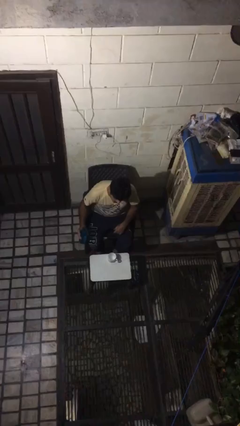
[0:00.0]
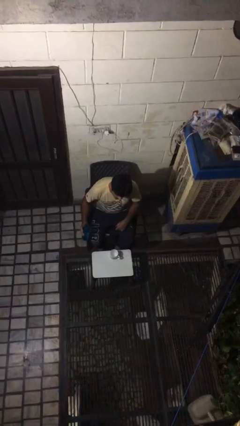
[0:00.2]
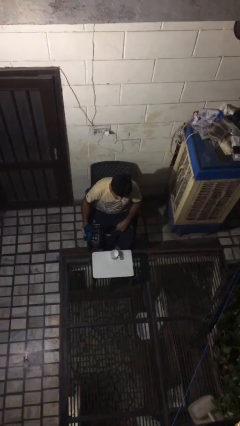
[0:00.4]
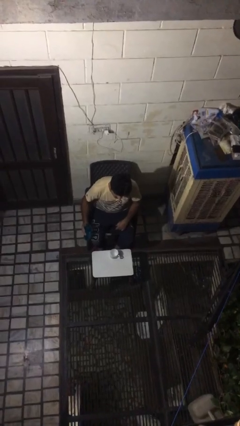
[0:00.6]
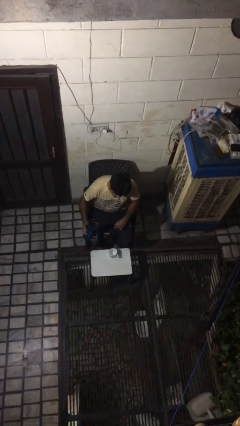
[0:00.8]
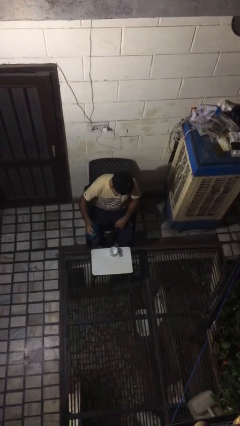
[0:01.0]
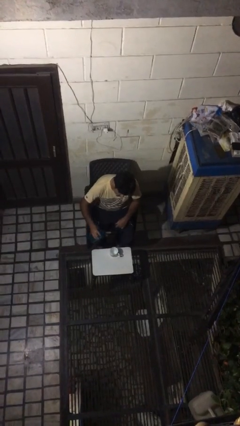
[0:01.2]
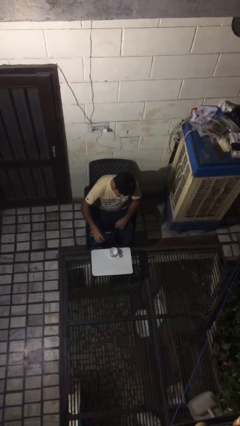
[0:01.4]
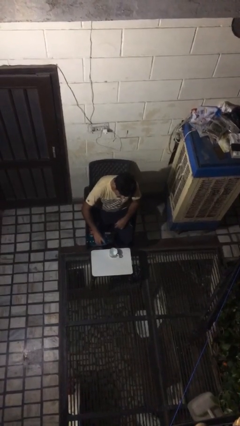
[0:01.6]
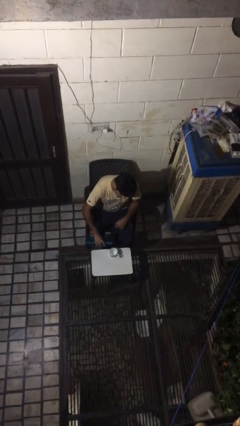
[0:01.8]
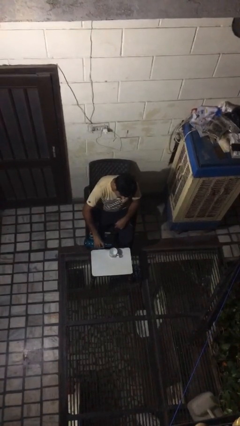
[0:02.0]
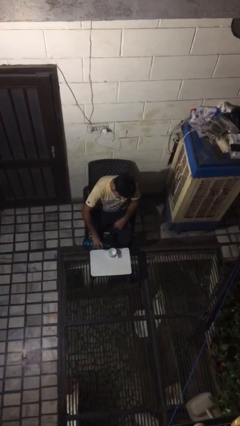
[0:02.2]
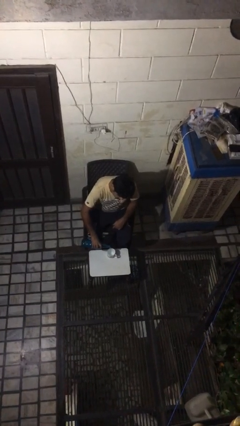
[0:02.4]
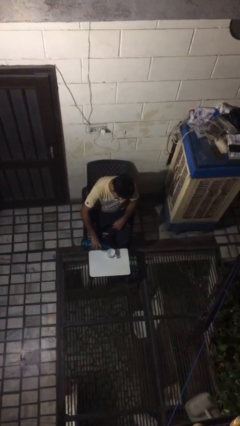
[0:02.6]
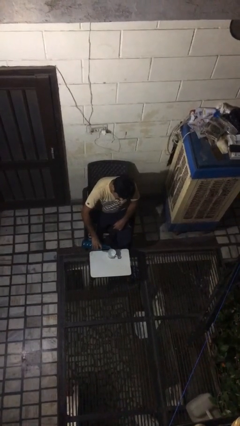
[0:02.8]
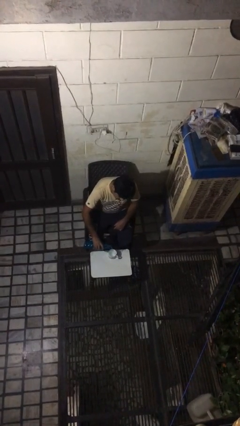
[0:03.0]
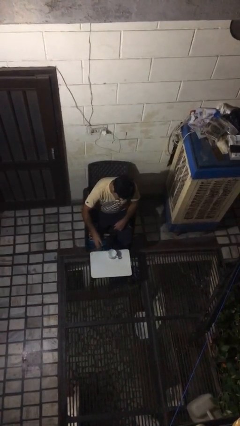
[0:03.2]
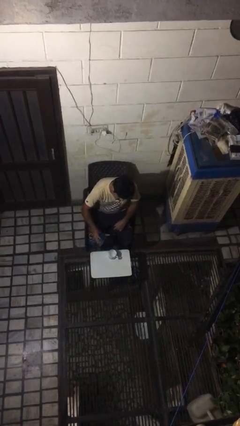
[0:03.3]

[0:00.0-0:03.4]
person pours liquid into cup

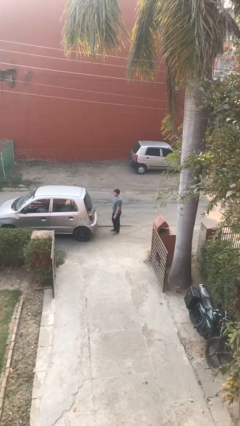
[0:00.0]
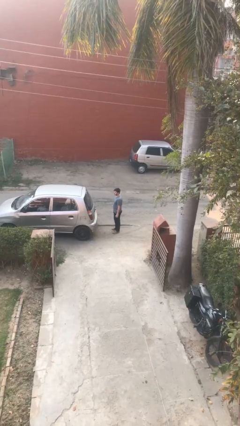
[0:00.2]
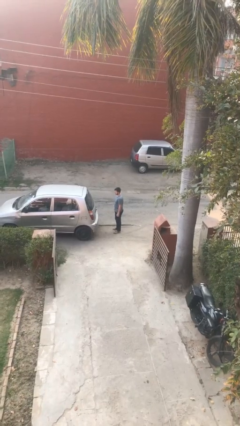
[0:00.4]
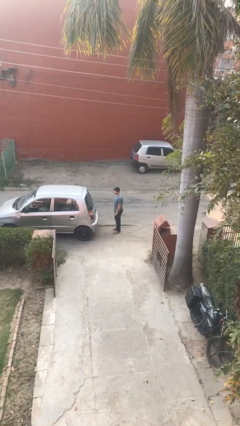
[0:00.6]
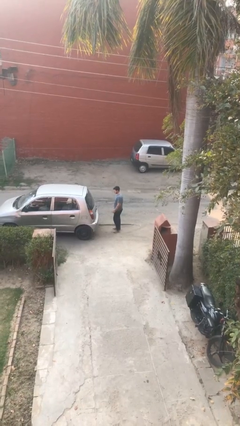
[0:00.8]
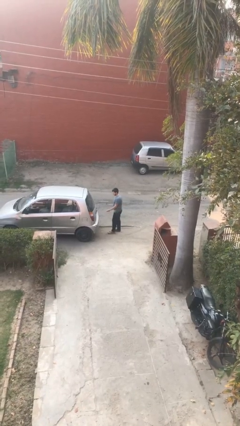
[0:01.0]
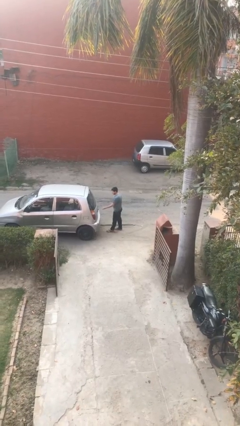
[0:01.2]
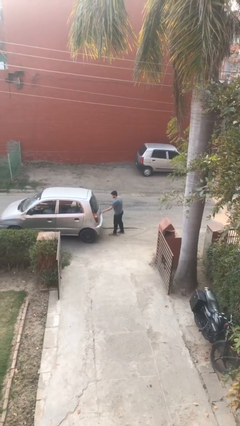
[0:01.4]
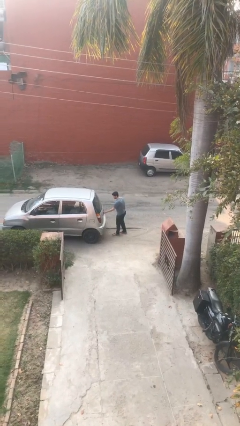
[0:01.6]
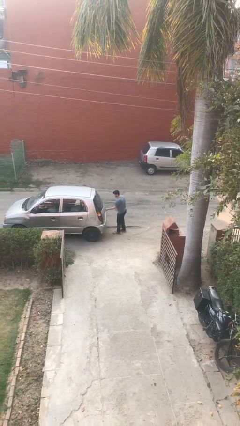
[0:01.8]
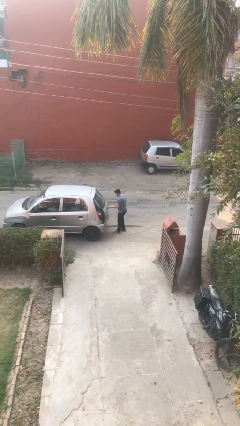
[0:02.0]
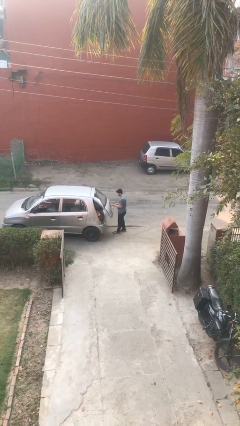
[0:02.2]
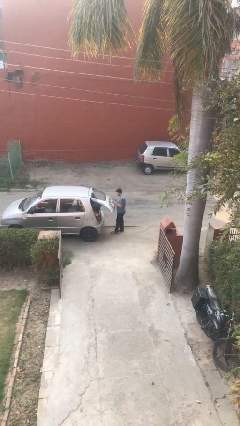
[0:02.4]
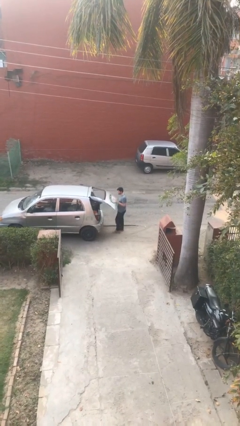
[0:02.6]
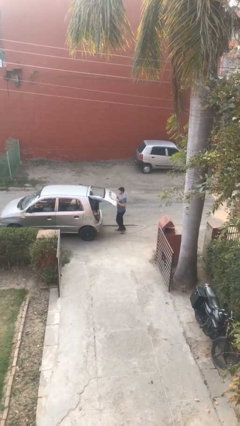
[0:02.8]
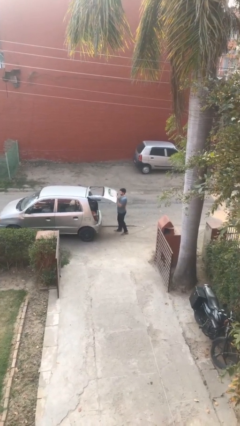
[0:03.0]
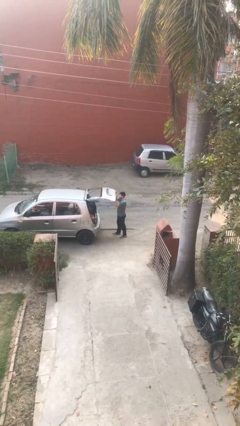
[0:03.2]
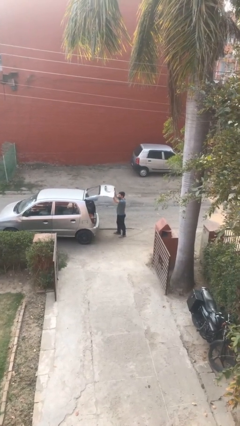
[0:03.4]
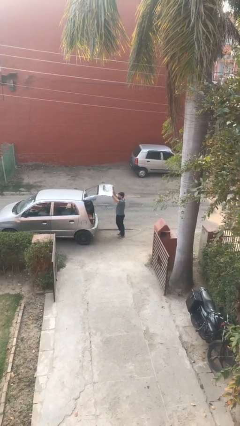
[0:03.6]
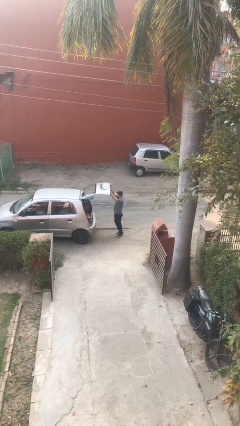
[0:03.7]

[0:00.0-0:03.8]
person opens car trunk

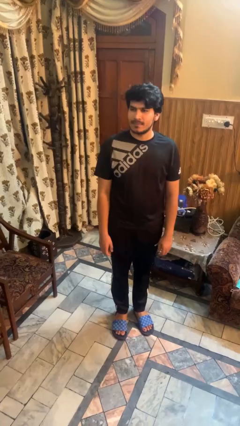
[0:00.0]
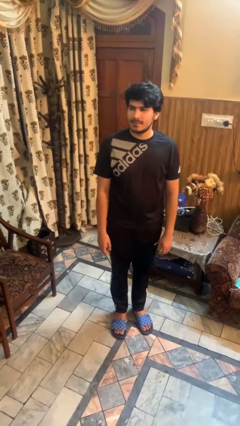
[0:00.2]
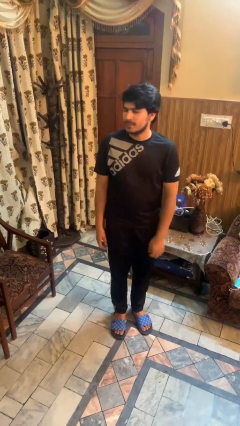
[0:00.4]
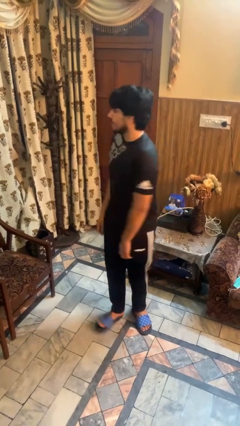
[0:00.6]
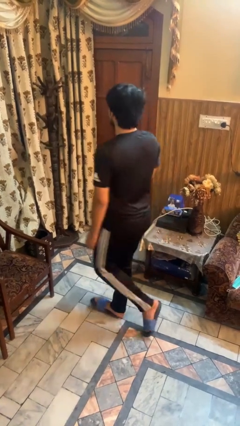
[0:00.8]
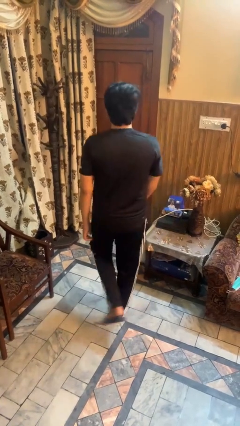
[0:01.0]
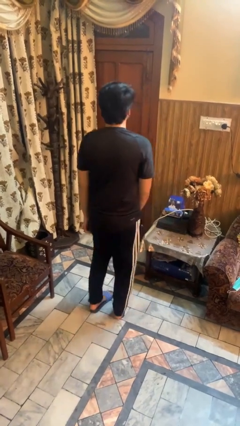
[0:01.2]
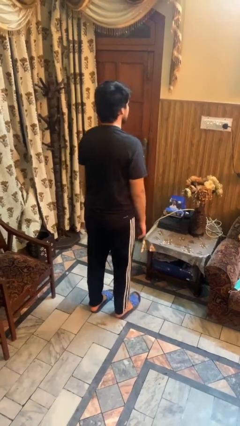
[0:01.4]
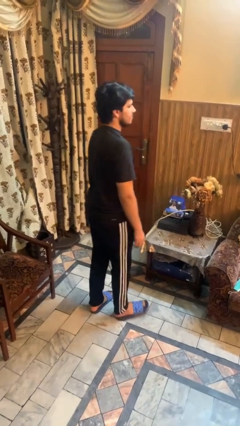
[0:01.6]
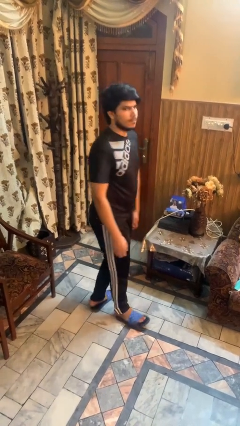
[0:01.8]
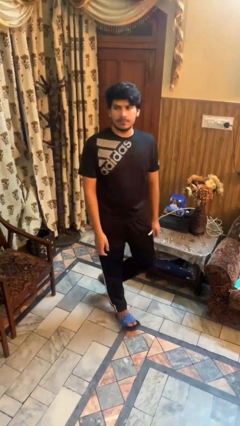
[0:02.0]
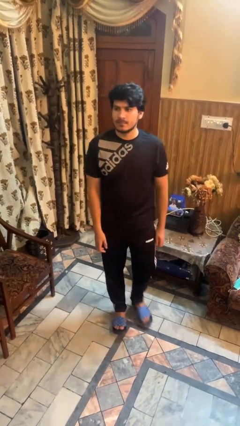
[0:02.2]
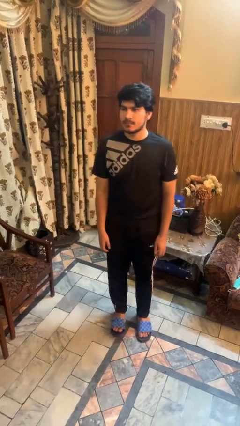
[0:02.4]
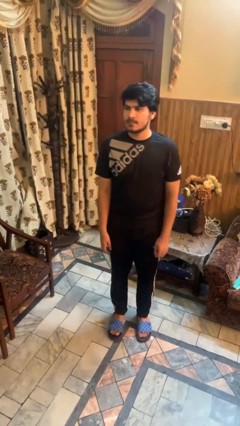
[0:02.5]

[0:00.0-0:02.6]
person twirls

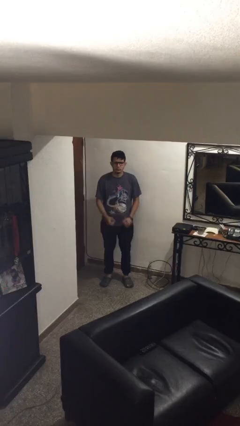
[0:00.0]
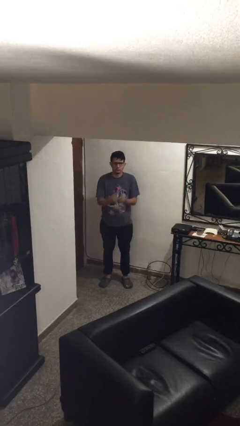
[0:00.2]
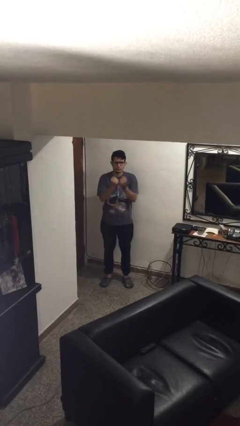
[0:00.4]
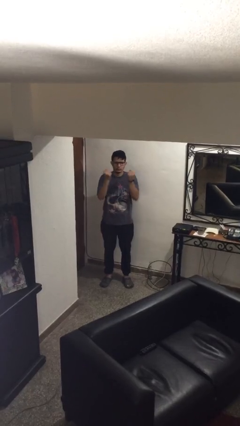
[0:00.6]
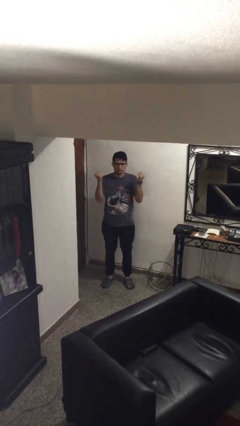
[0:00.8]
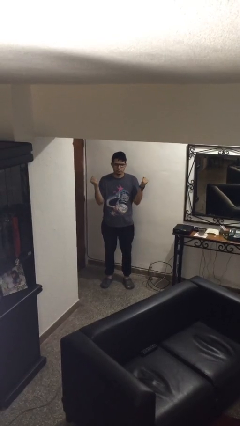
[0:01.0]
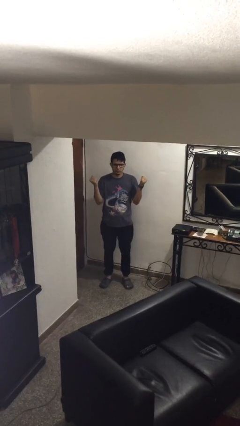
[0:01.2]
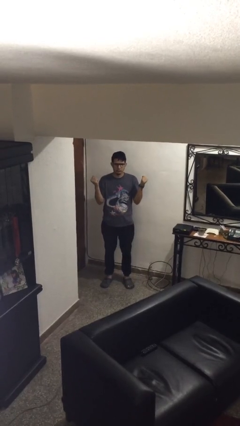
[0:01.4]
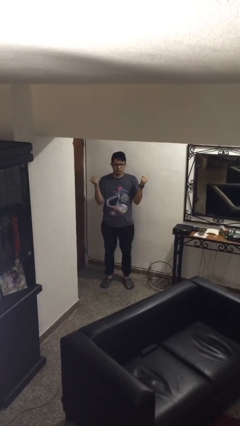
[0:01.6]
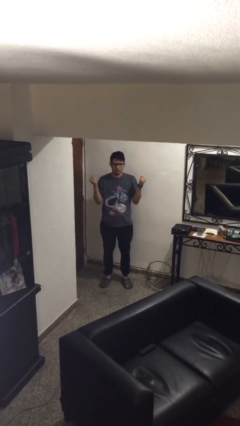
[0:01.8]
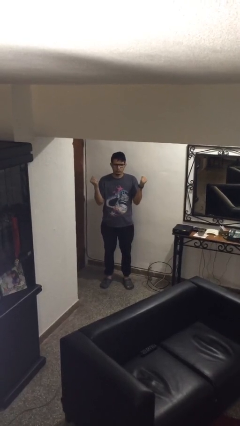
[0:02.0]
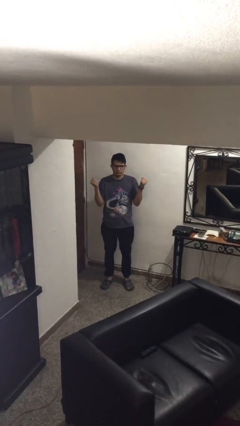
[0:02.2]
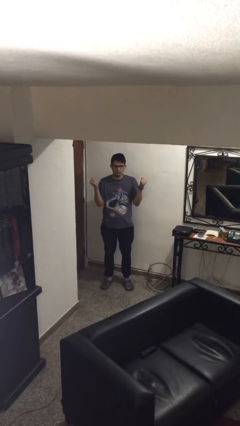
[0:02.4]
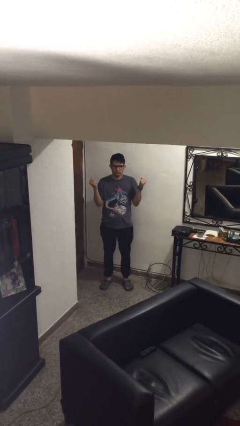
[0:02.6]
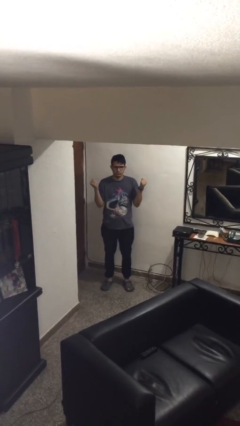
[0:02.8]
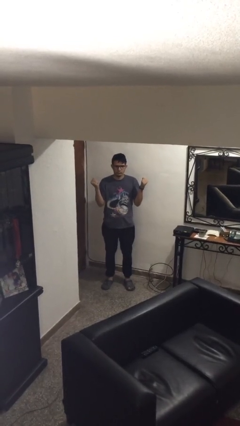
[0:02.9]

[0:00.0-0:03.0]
person gestures zoom in

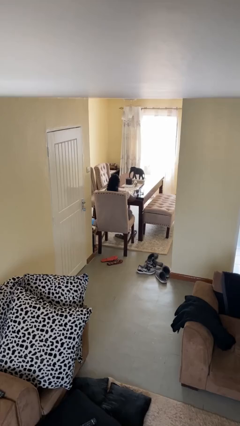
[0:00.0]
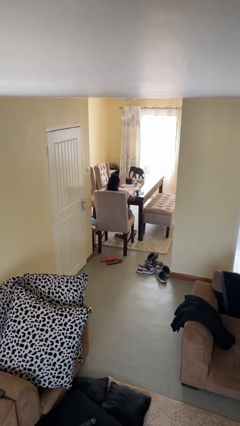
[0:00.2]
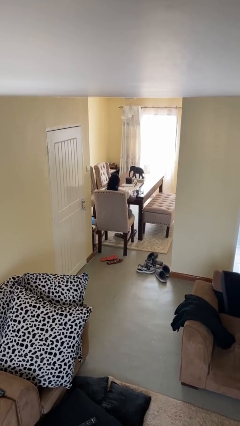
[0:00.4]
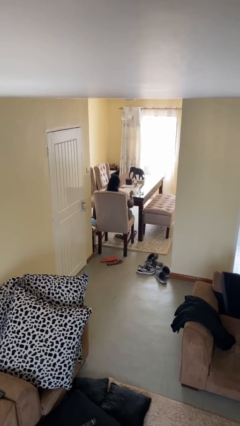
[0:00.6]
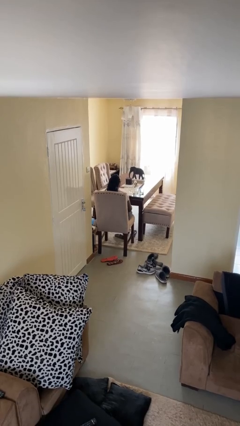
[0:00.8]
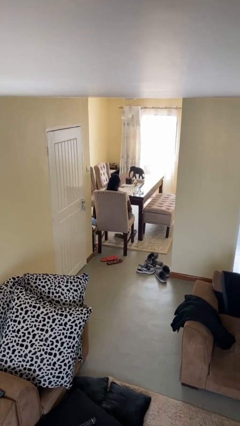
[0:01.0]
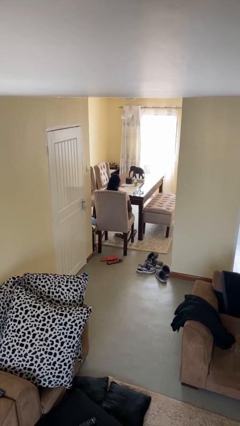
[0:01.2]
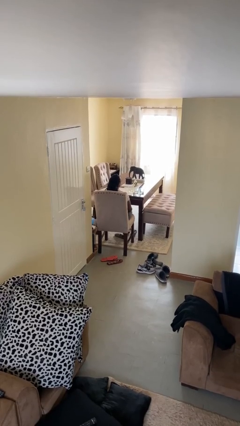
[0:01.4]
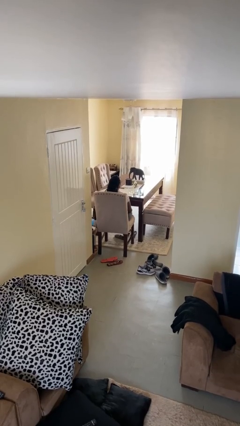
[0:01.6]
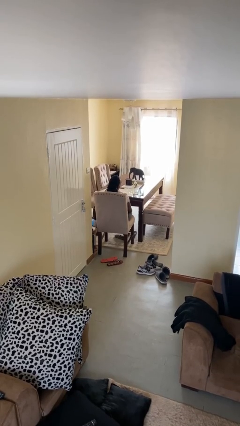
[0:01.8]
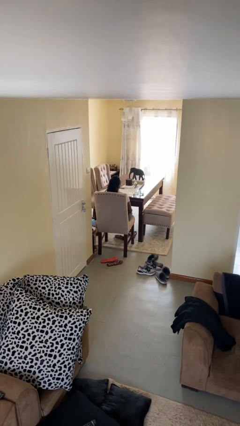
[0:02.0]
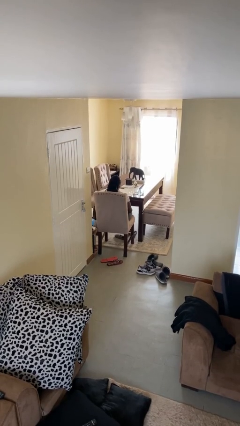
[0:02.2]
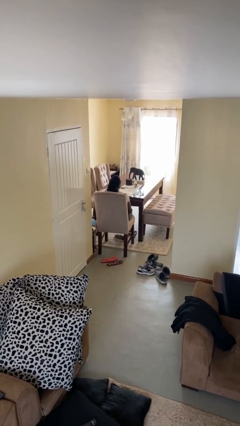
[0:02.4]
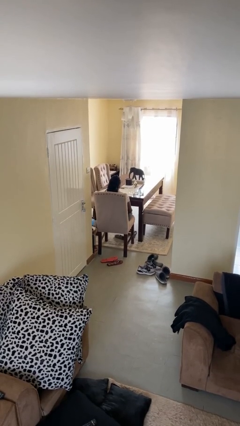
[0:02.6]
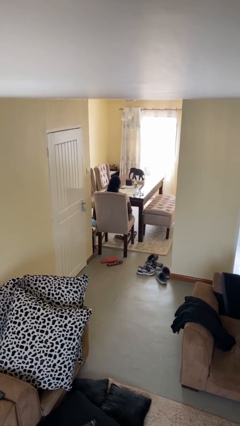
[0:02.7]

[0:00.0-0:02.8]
person puts down object on table

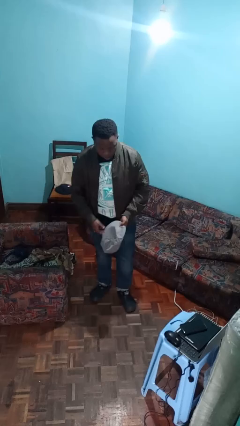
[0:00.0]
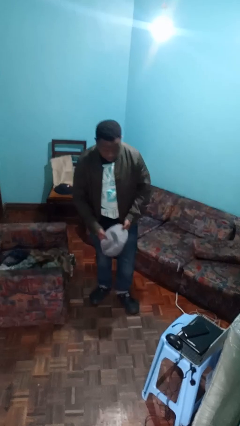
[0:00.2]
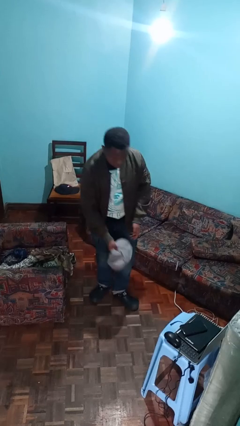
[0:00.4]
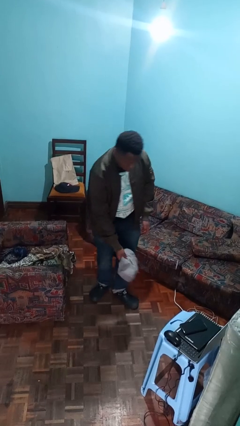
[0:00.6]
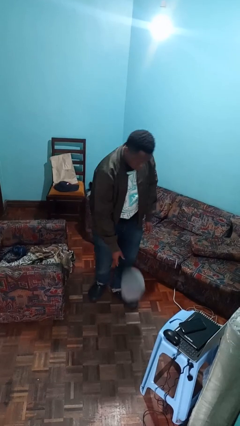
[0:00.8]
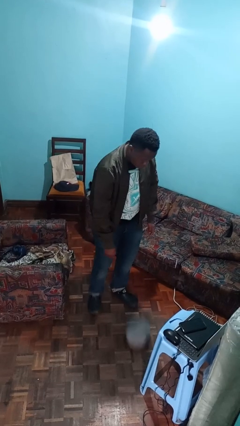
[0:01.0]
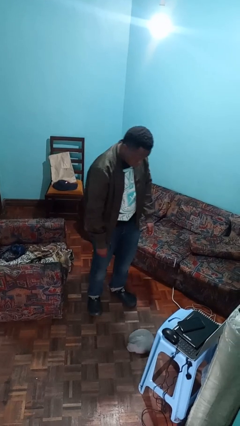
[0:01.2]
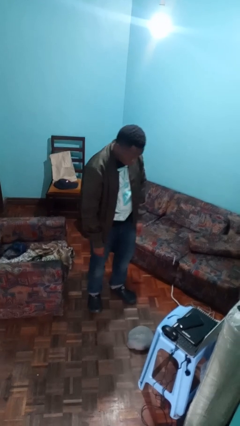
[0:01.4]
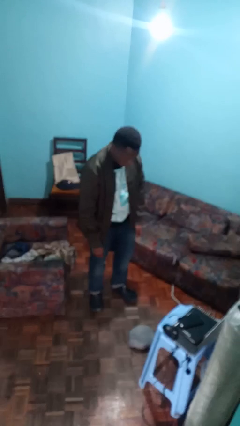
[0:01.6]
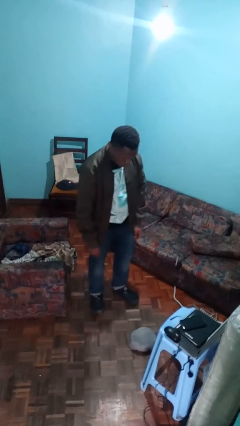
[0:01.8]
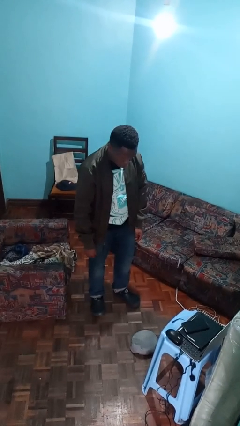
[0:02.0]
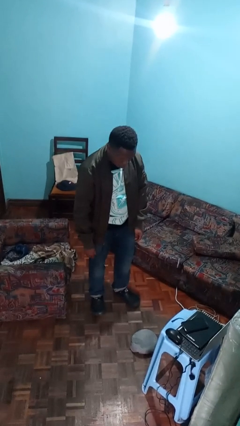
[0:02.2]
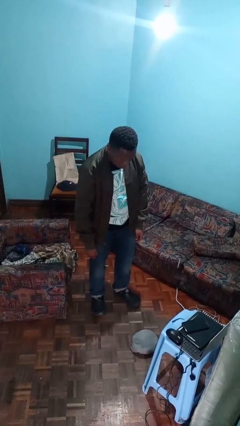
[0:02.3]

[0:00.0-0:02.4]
person drops object
